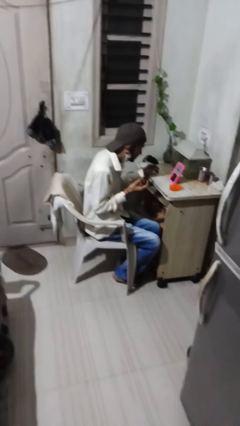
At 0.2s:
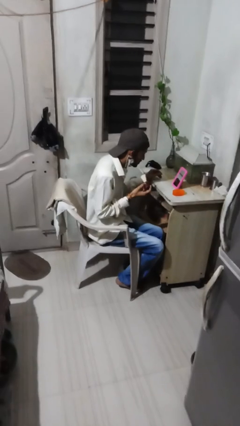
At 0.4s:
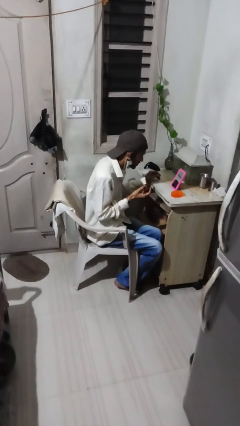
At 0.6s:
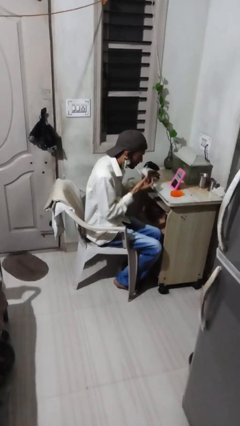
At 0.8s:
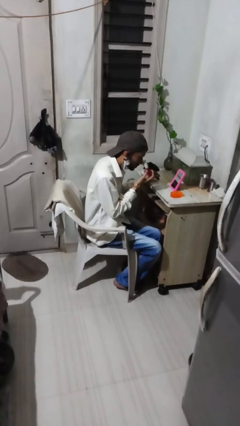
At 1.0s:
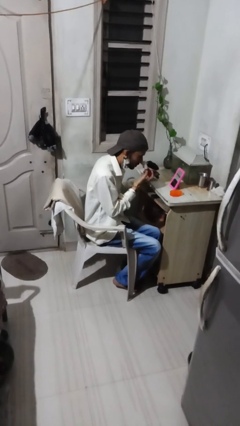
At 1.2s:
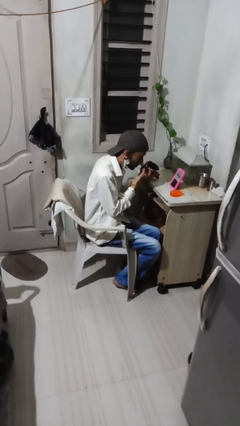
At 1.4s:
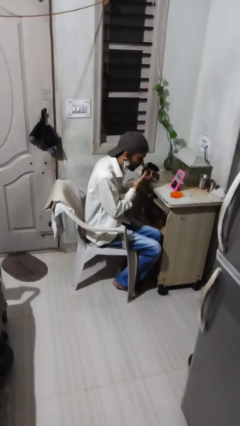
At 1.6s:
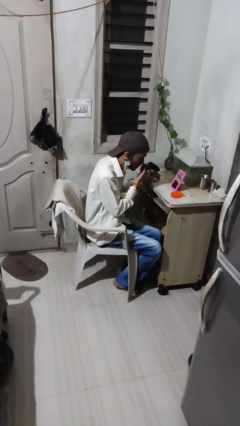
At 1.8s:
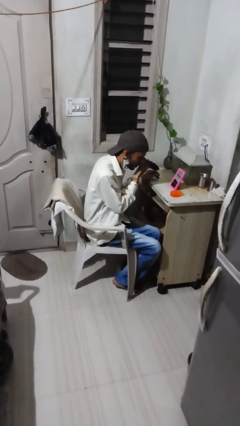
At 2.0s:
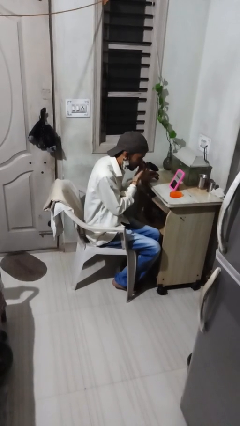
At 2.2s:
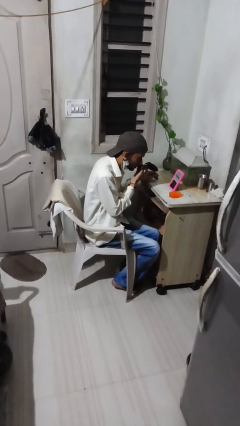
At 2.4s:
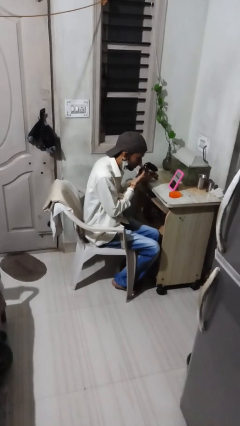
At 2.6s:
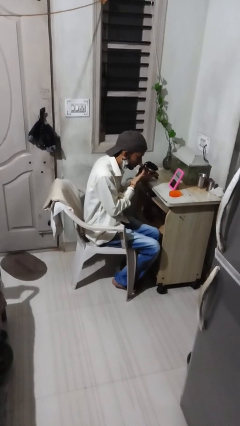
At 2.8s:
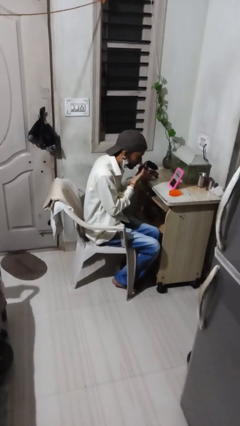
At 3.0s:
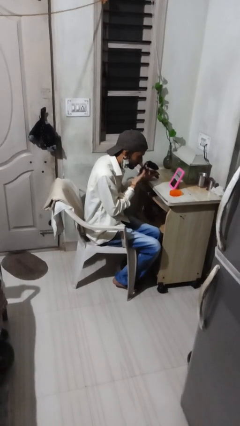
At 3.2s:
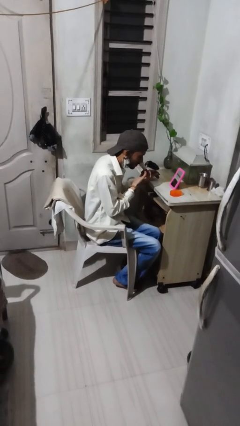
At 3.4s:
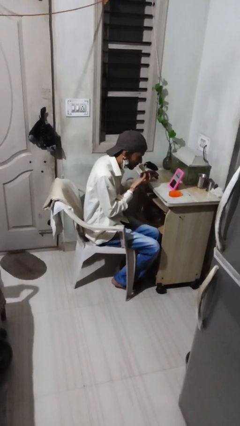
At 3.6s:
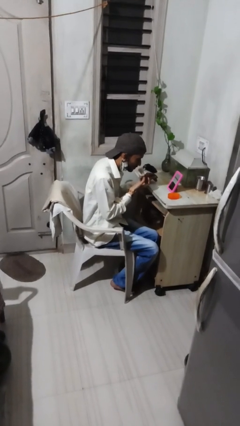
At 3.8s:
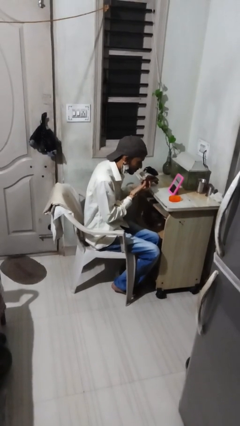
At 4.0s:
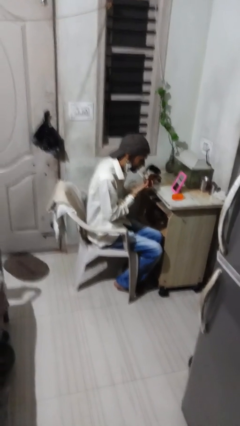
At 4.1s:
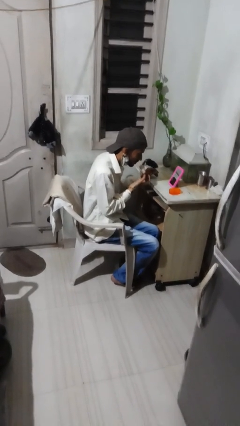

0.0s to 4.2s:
person applies foundation makeup

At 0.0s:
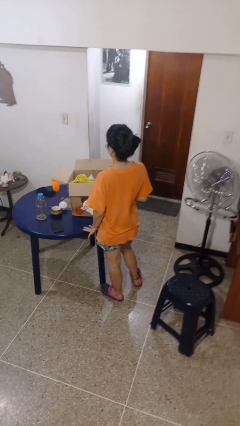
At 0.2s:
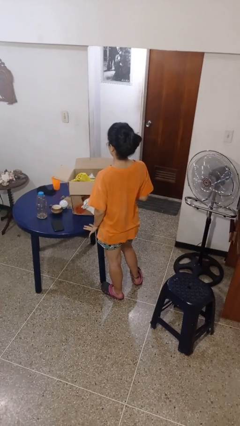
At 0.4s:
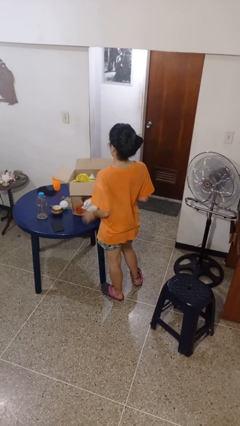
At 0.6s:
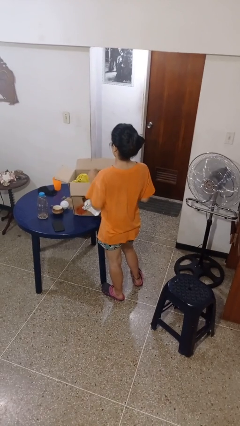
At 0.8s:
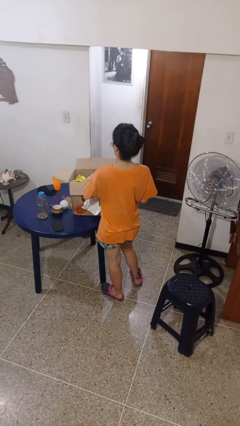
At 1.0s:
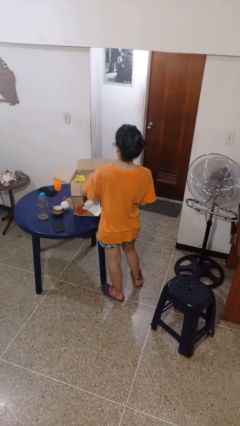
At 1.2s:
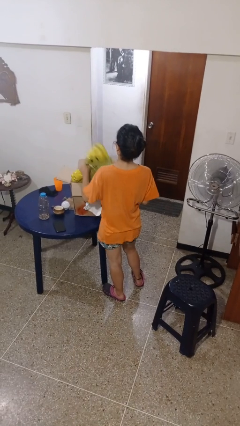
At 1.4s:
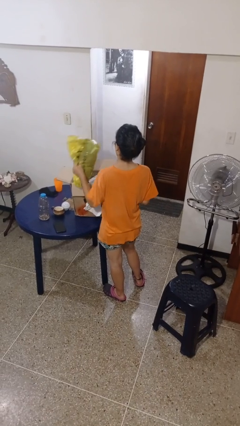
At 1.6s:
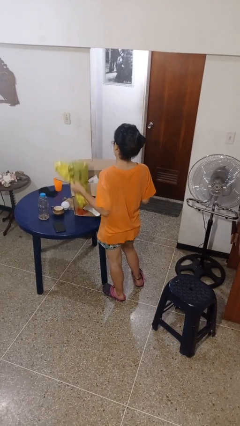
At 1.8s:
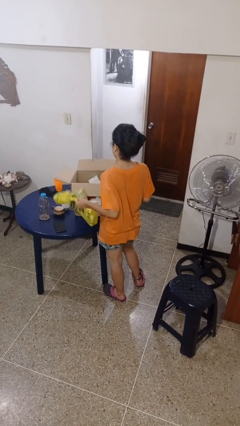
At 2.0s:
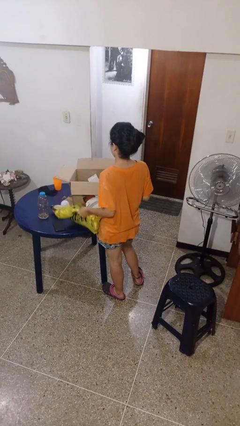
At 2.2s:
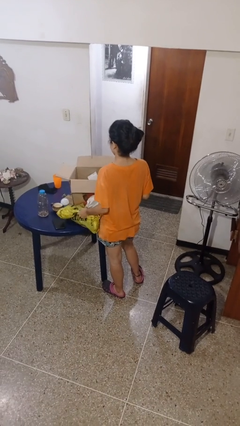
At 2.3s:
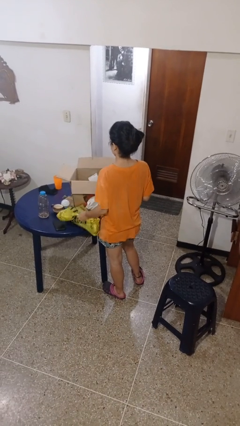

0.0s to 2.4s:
person takes object from box

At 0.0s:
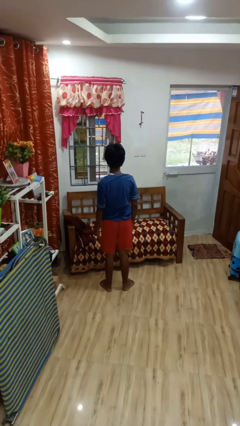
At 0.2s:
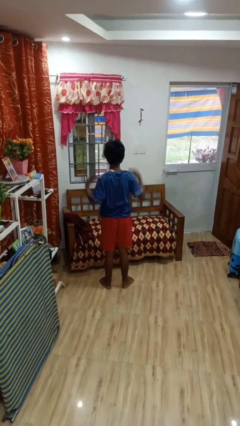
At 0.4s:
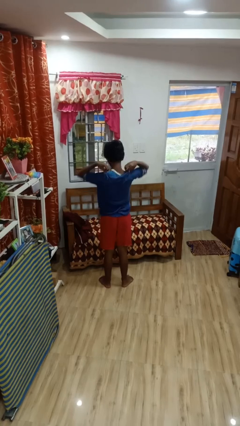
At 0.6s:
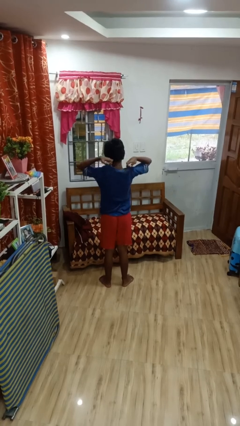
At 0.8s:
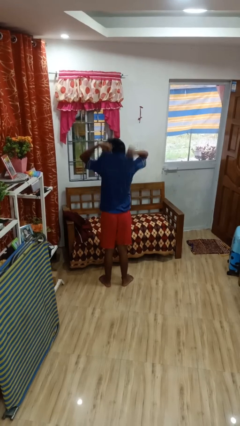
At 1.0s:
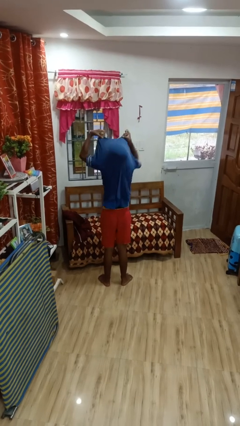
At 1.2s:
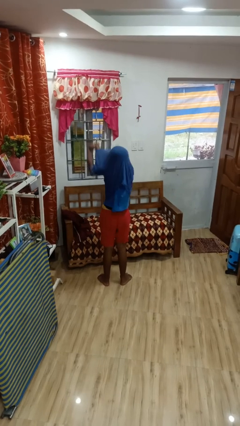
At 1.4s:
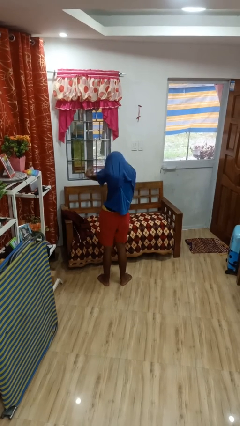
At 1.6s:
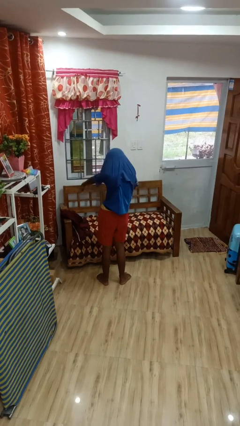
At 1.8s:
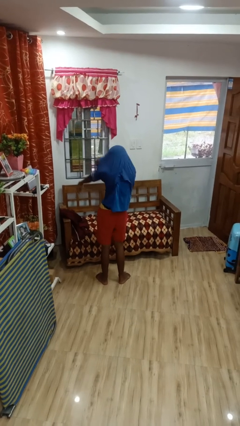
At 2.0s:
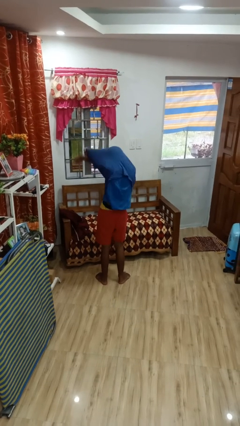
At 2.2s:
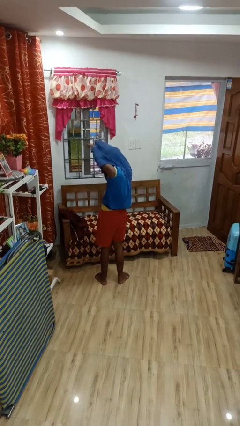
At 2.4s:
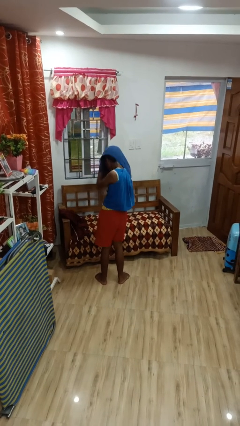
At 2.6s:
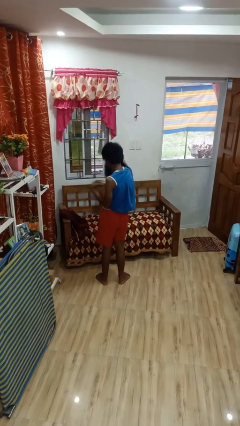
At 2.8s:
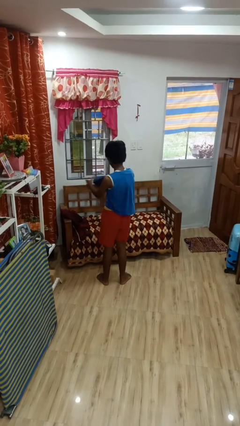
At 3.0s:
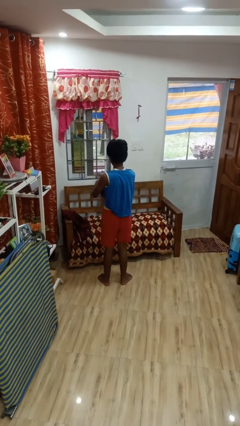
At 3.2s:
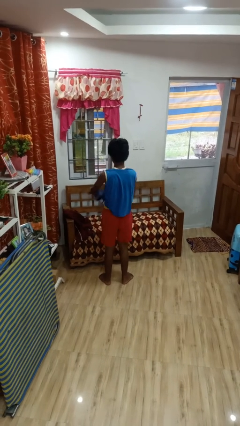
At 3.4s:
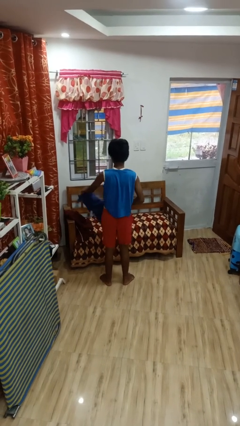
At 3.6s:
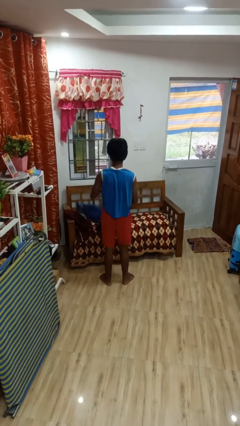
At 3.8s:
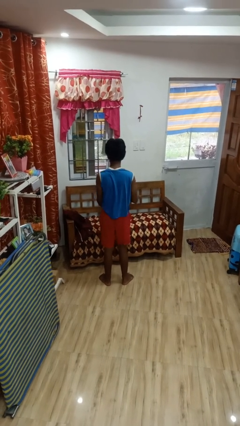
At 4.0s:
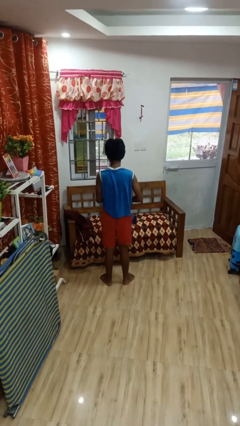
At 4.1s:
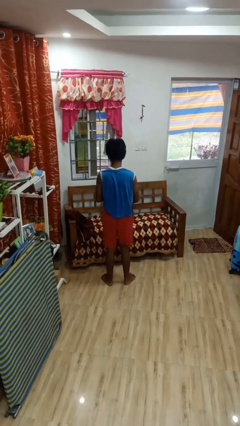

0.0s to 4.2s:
person takes off shirt

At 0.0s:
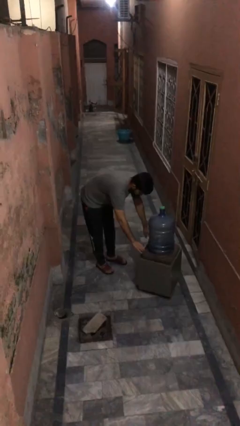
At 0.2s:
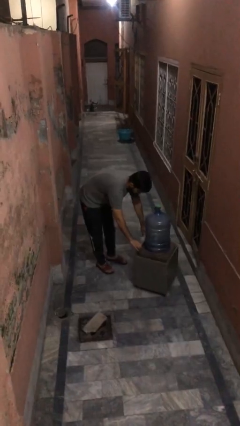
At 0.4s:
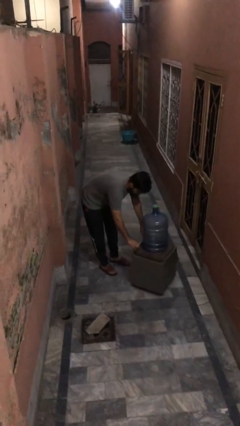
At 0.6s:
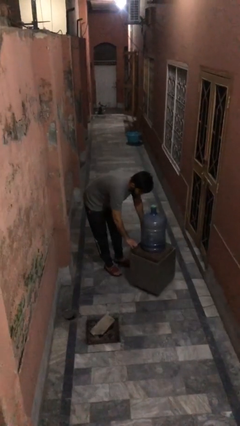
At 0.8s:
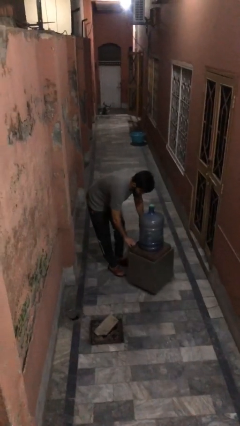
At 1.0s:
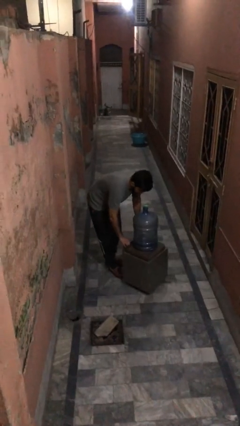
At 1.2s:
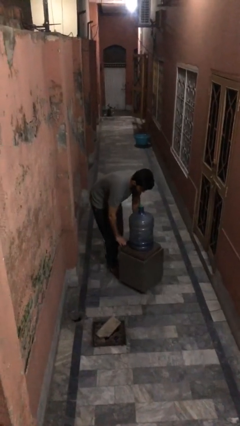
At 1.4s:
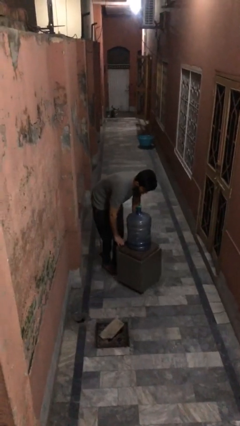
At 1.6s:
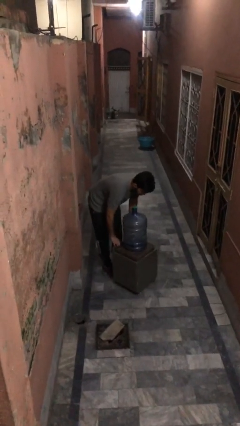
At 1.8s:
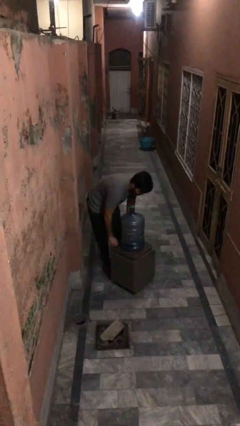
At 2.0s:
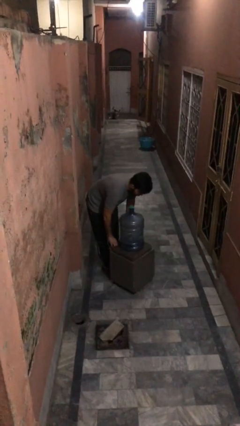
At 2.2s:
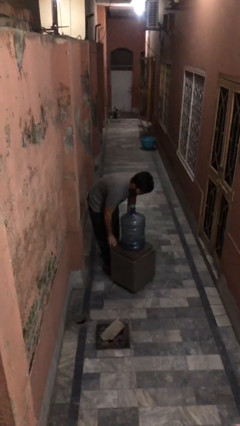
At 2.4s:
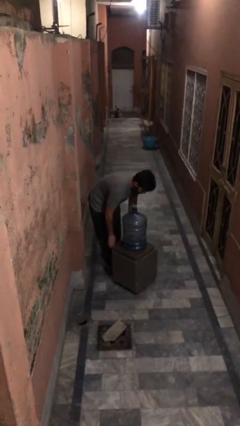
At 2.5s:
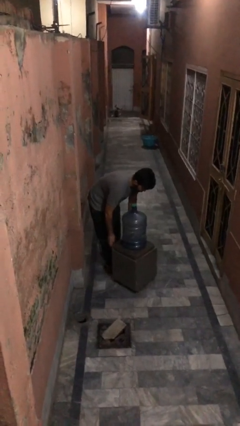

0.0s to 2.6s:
person pulls wheeled cart

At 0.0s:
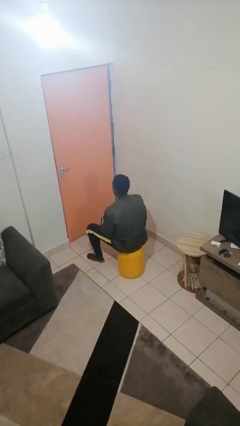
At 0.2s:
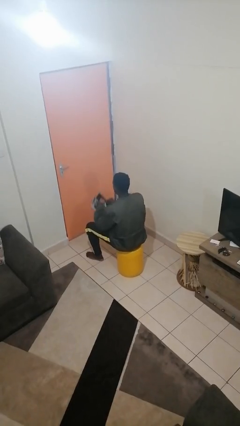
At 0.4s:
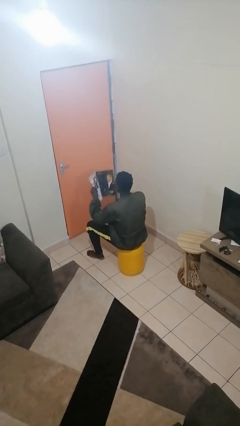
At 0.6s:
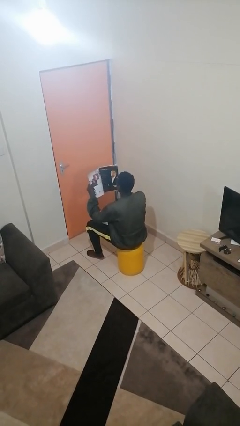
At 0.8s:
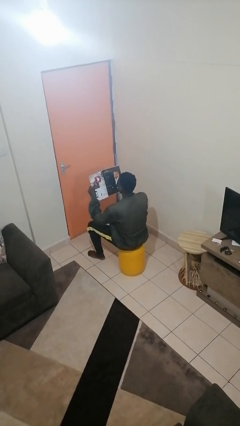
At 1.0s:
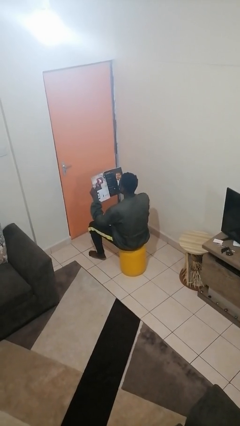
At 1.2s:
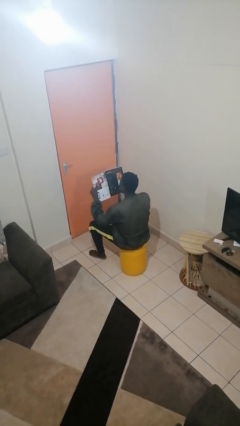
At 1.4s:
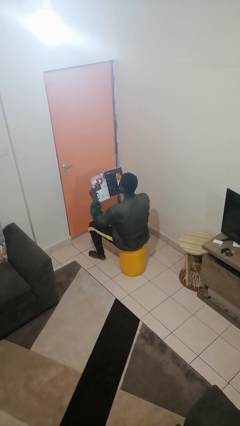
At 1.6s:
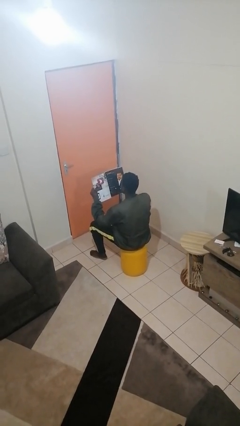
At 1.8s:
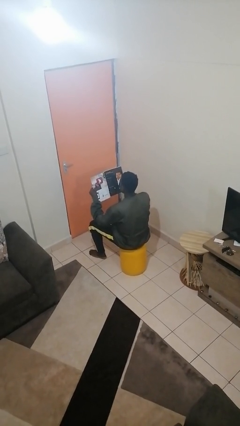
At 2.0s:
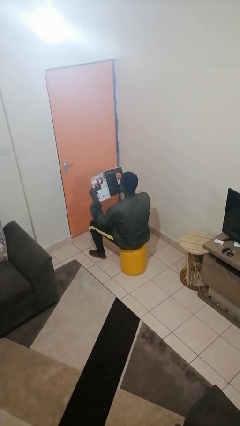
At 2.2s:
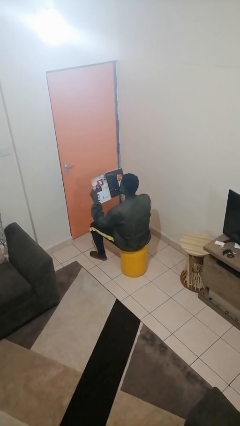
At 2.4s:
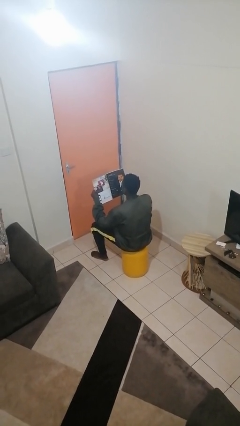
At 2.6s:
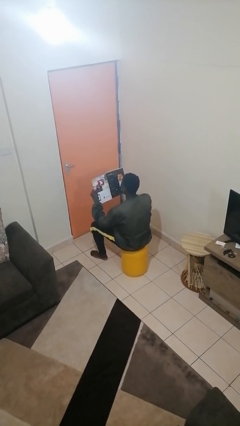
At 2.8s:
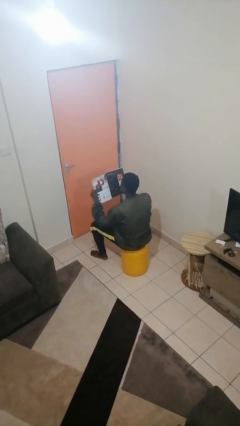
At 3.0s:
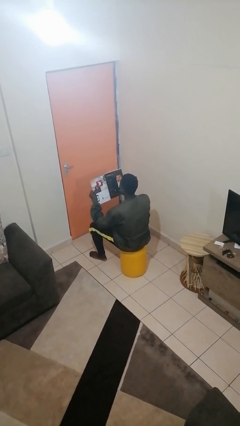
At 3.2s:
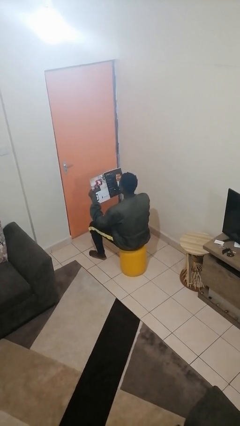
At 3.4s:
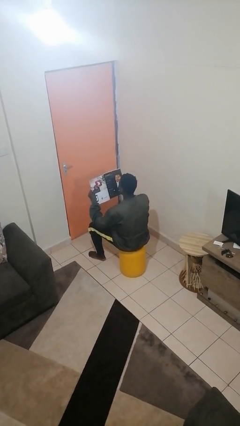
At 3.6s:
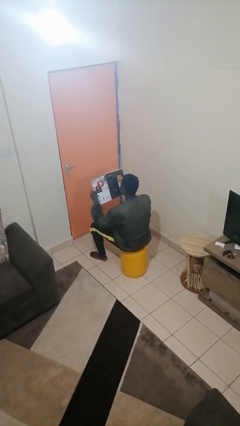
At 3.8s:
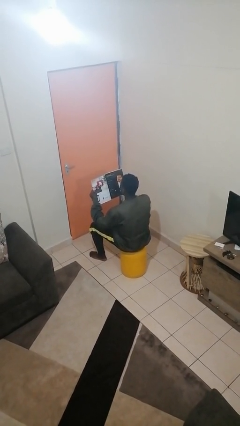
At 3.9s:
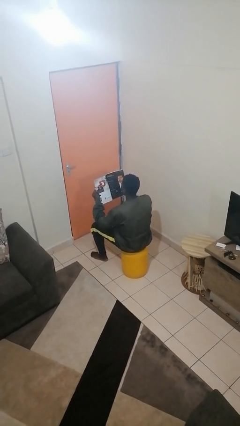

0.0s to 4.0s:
person reads magazine

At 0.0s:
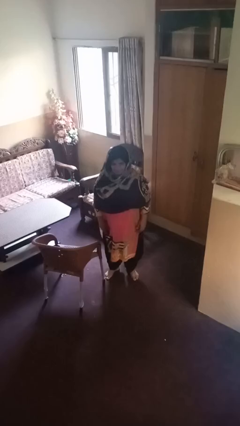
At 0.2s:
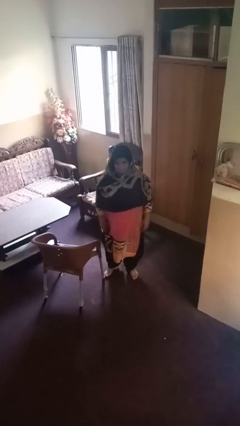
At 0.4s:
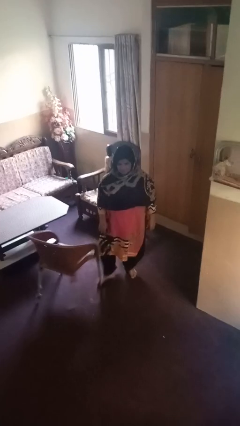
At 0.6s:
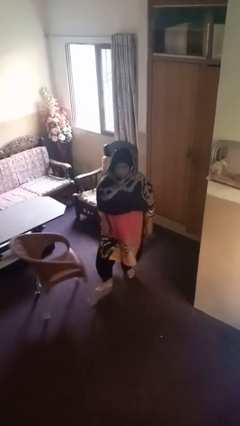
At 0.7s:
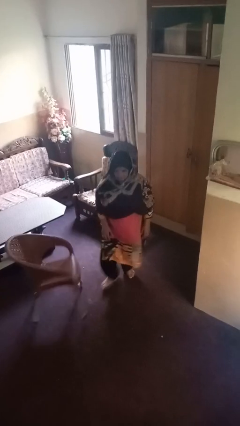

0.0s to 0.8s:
person trips on object on floor
